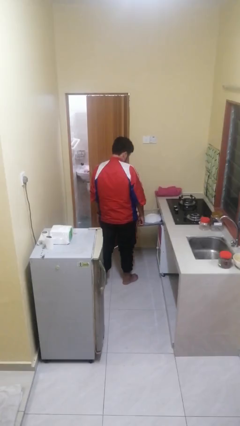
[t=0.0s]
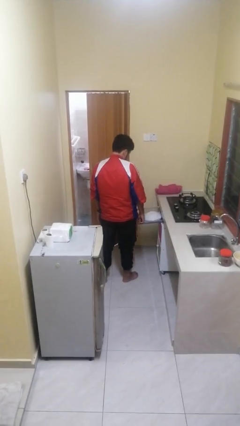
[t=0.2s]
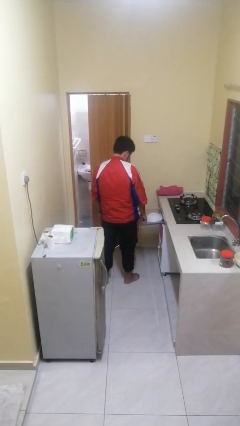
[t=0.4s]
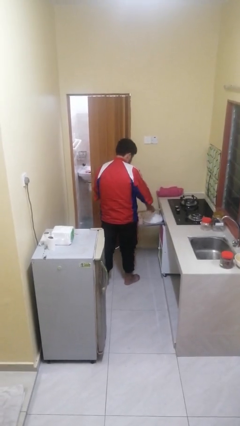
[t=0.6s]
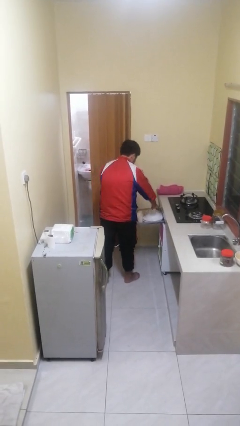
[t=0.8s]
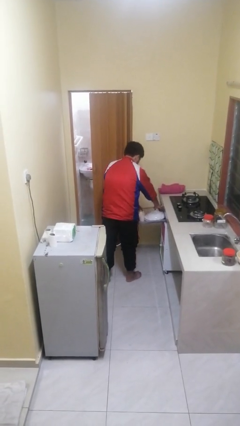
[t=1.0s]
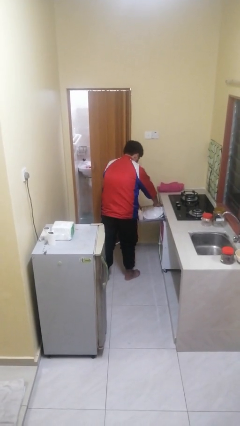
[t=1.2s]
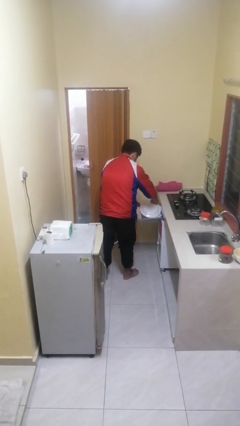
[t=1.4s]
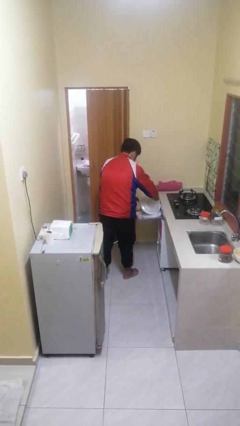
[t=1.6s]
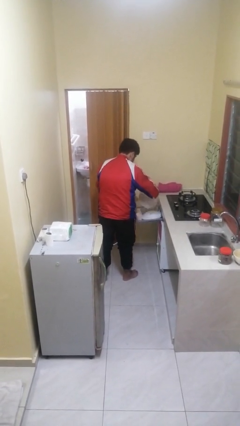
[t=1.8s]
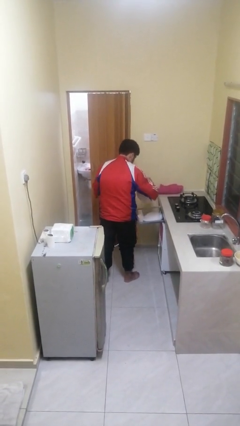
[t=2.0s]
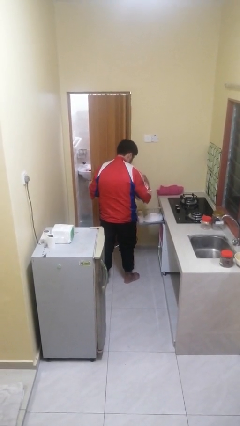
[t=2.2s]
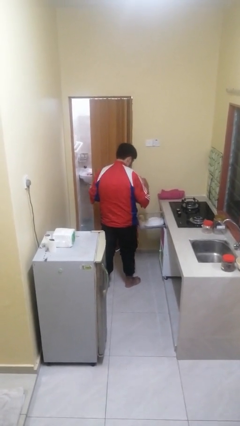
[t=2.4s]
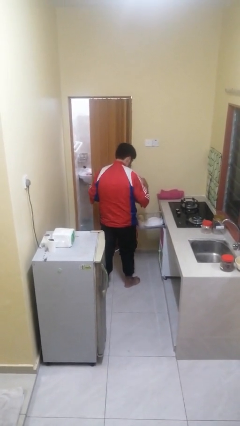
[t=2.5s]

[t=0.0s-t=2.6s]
person takes object from kitchen drawer

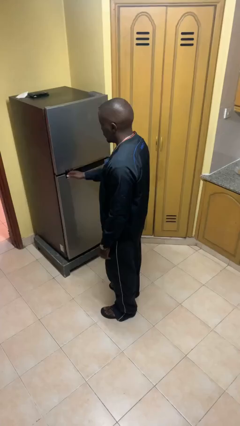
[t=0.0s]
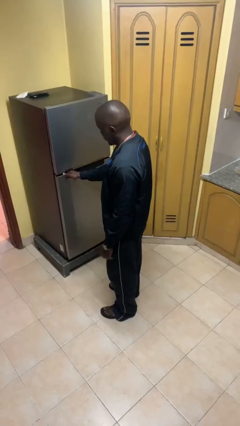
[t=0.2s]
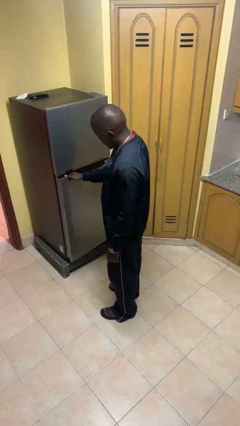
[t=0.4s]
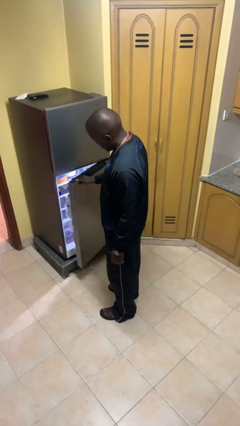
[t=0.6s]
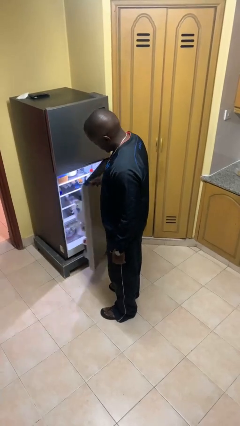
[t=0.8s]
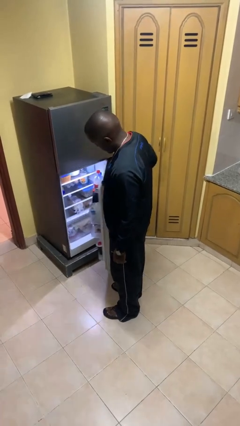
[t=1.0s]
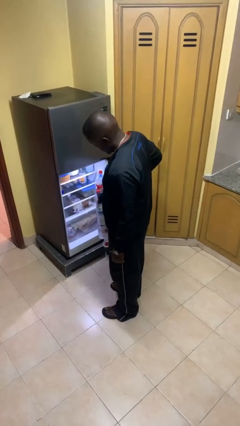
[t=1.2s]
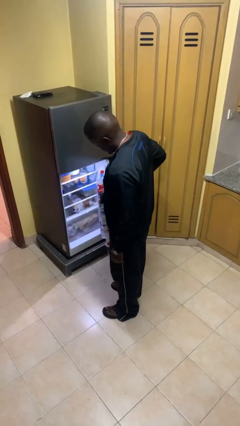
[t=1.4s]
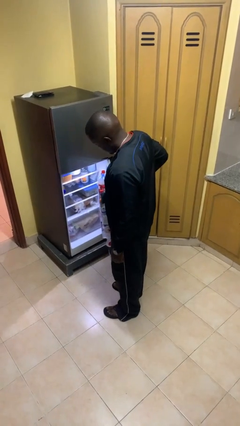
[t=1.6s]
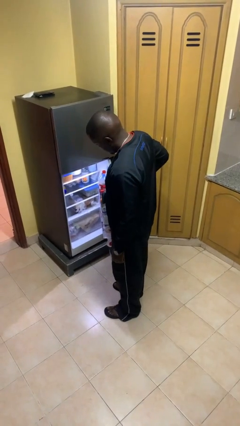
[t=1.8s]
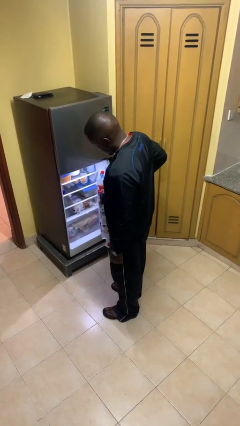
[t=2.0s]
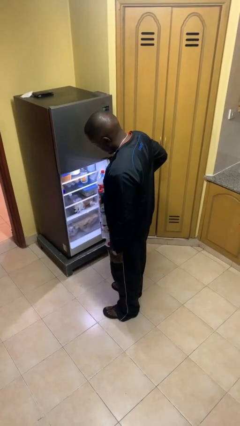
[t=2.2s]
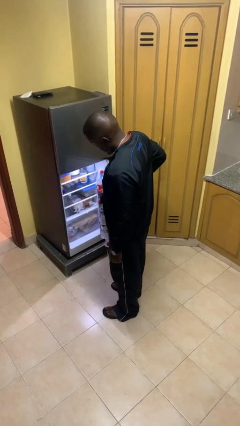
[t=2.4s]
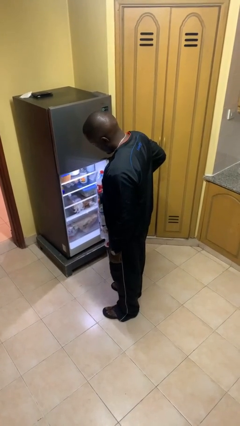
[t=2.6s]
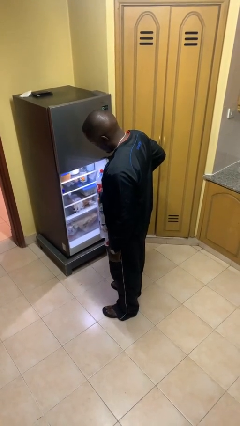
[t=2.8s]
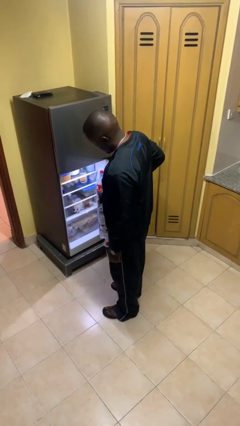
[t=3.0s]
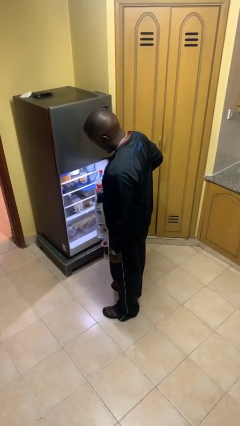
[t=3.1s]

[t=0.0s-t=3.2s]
person opens refrigerator

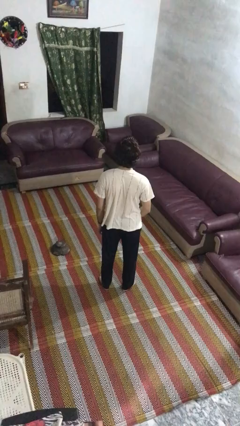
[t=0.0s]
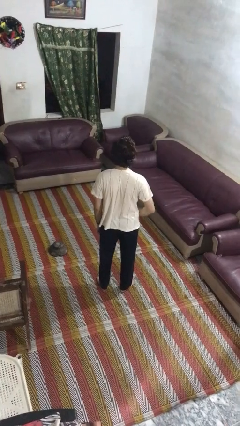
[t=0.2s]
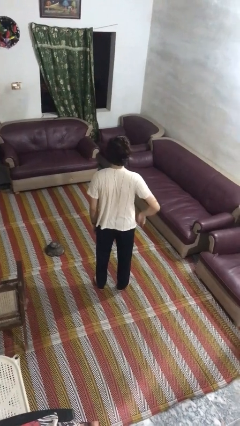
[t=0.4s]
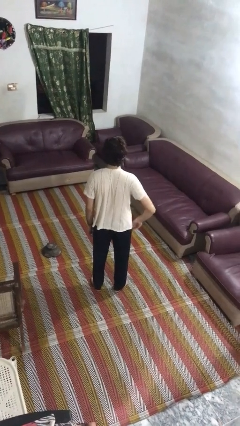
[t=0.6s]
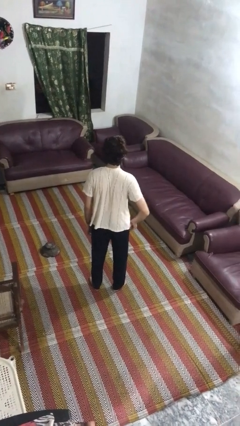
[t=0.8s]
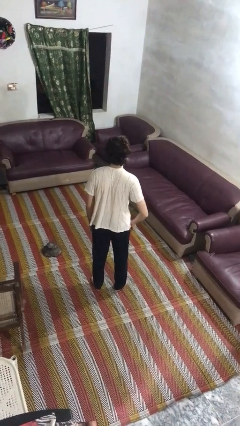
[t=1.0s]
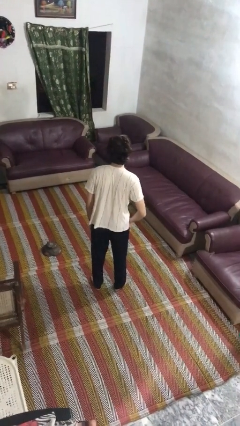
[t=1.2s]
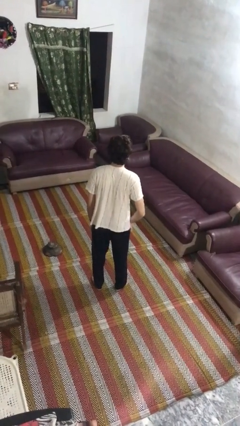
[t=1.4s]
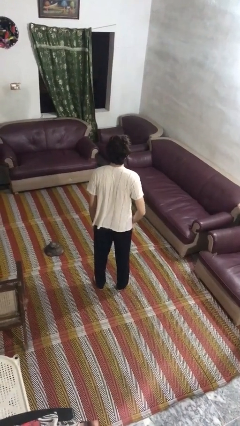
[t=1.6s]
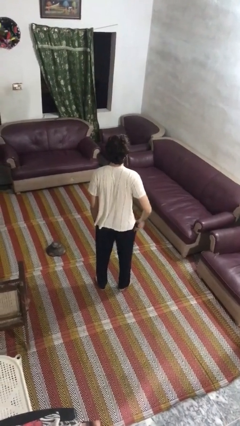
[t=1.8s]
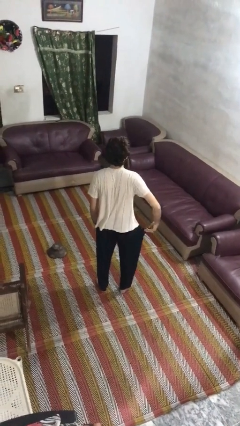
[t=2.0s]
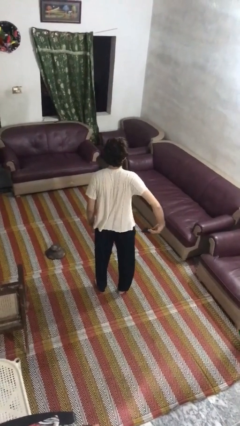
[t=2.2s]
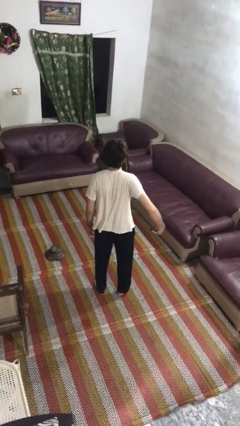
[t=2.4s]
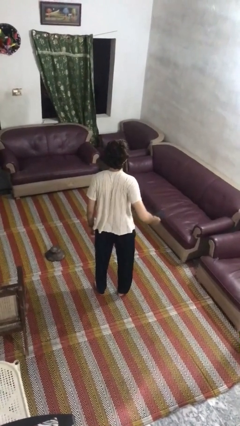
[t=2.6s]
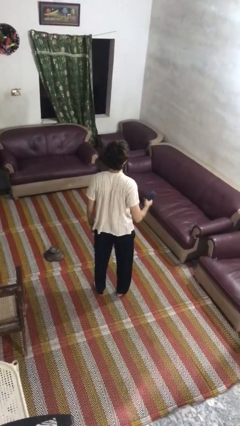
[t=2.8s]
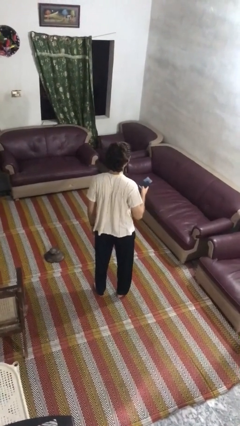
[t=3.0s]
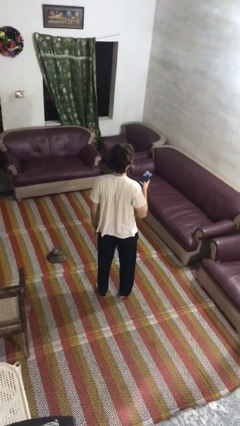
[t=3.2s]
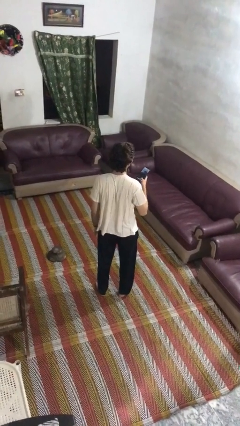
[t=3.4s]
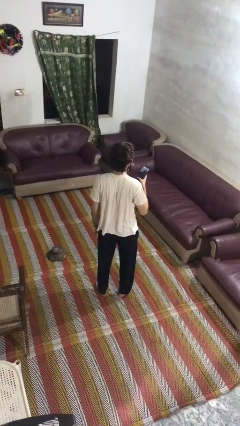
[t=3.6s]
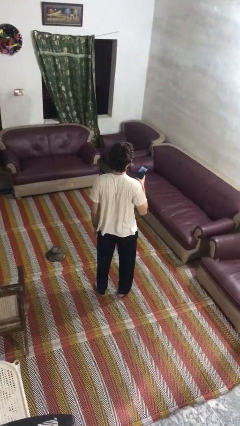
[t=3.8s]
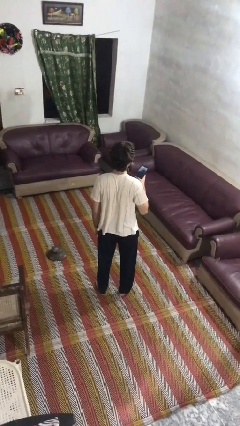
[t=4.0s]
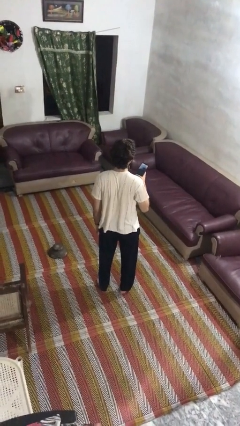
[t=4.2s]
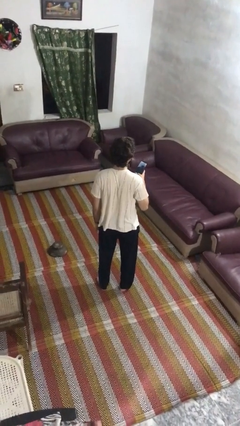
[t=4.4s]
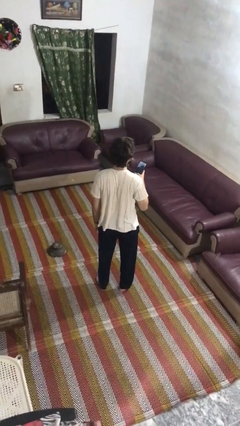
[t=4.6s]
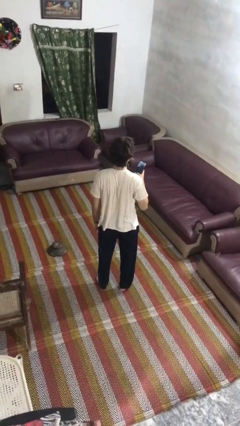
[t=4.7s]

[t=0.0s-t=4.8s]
person takes phone from pocket

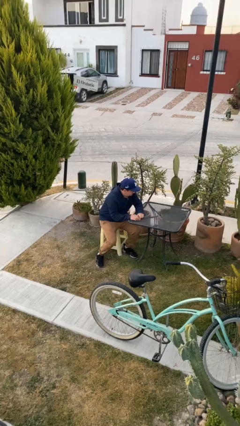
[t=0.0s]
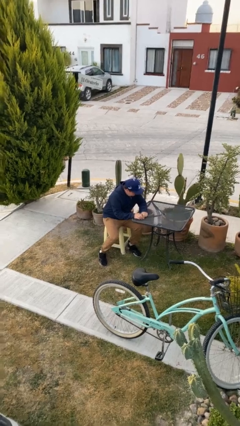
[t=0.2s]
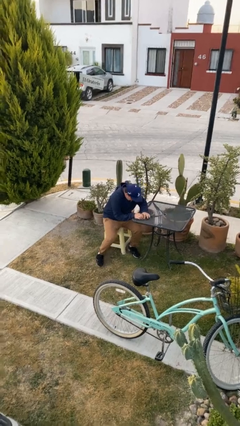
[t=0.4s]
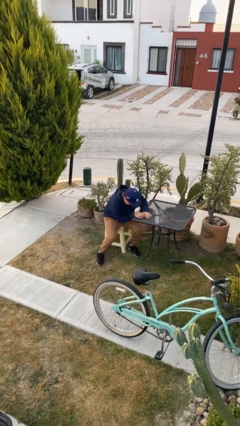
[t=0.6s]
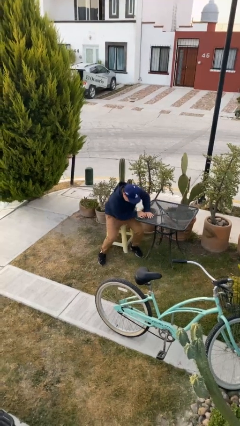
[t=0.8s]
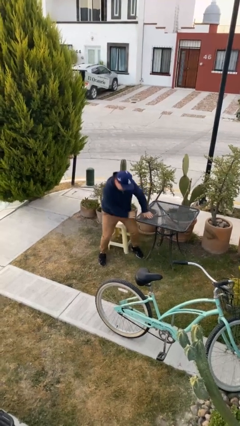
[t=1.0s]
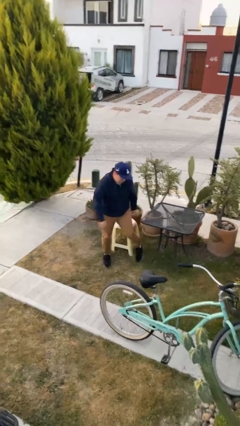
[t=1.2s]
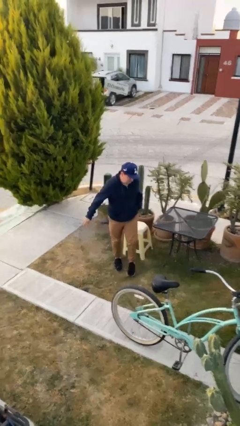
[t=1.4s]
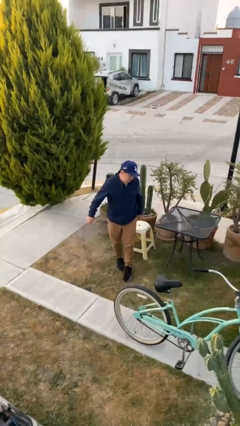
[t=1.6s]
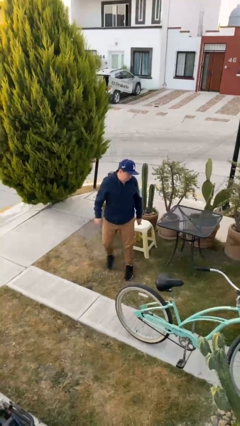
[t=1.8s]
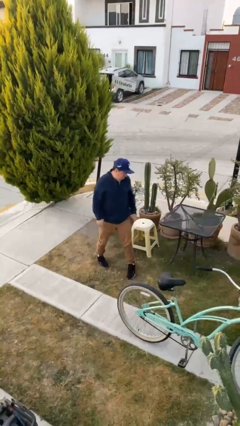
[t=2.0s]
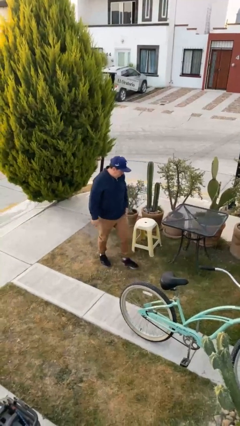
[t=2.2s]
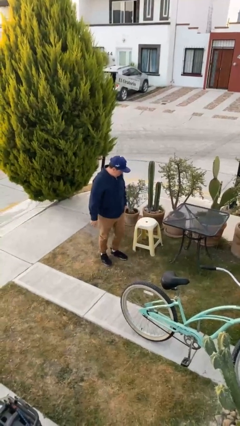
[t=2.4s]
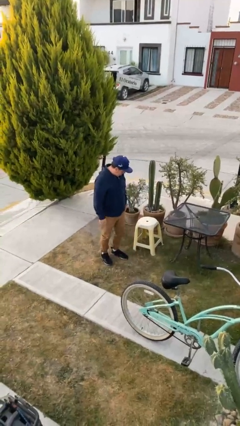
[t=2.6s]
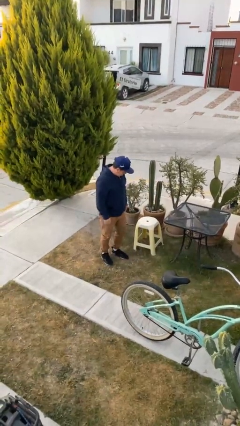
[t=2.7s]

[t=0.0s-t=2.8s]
person stands up

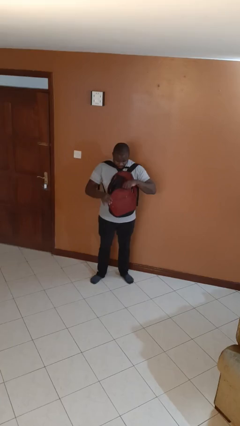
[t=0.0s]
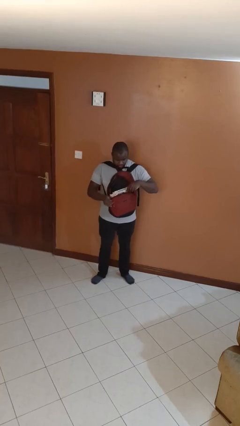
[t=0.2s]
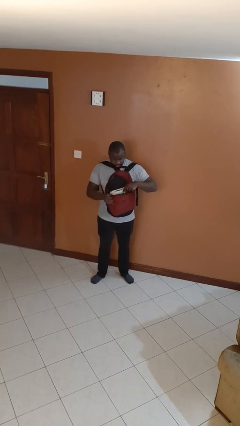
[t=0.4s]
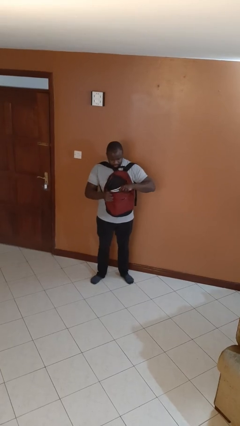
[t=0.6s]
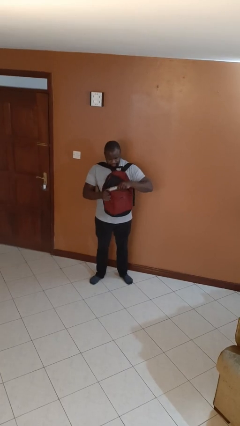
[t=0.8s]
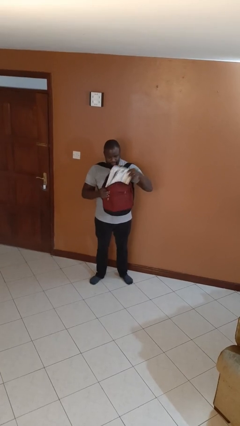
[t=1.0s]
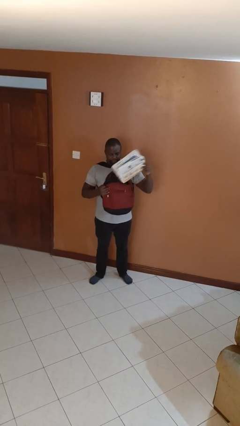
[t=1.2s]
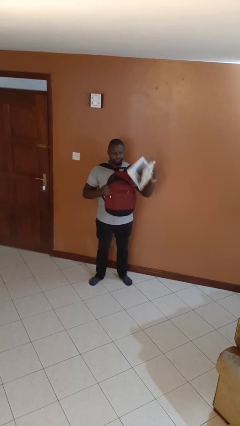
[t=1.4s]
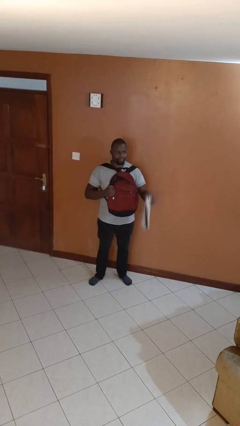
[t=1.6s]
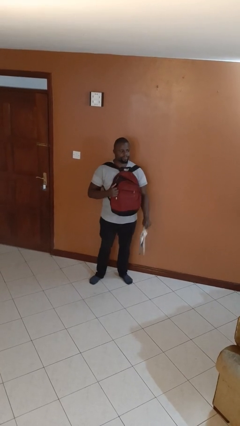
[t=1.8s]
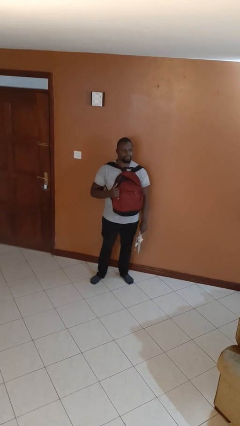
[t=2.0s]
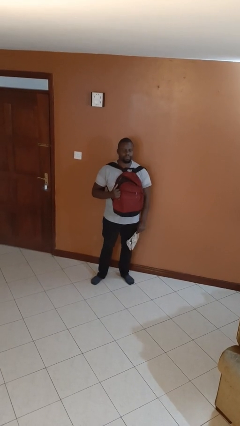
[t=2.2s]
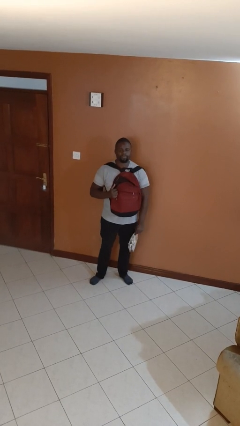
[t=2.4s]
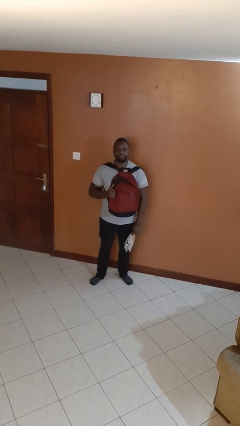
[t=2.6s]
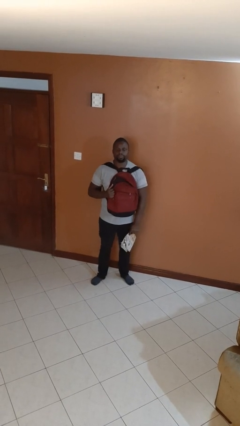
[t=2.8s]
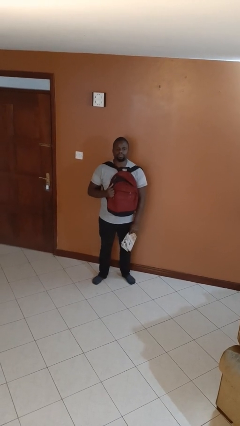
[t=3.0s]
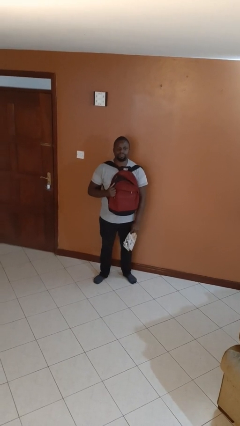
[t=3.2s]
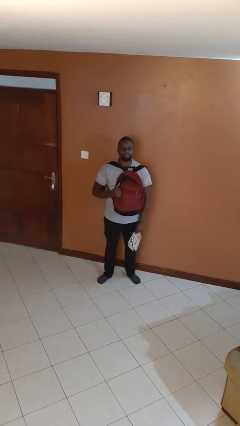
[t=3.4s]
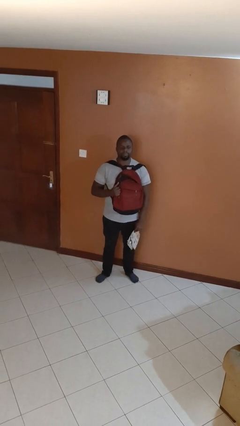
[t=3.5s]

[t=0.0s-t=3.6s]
person takes object from backpack
